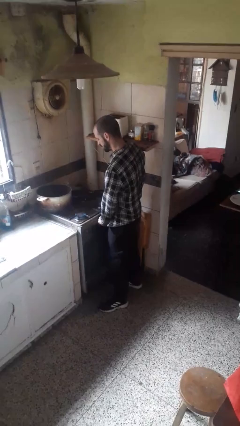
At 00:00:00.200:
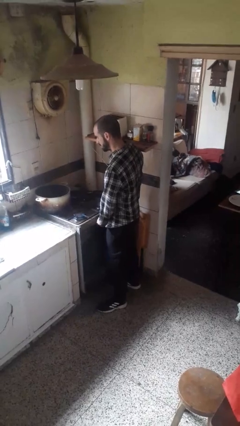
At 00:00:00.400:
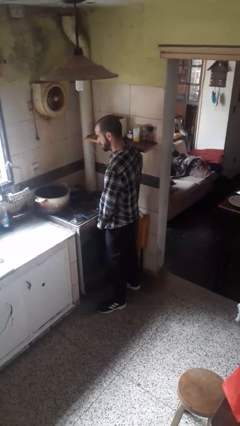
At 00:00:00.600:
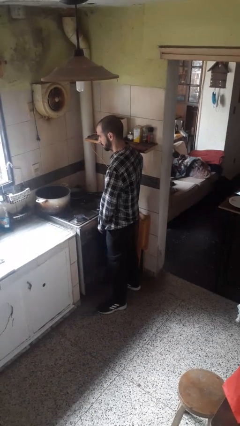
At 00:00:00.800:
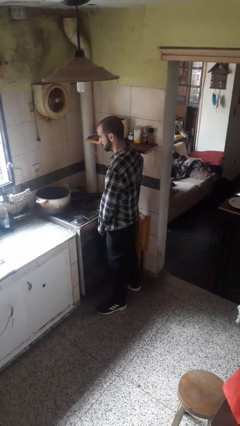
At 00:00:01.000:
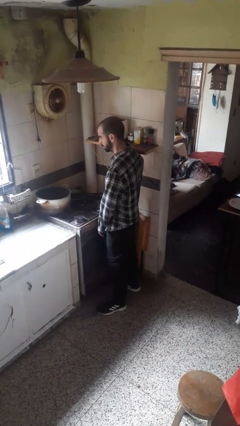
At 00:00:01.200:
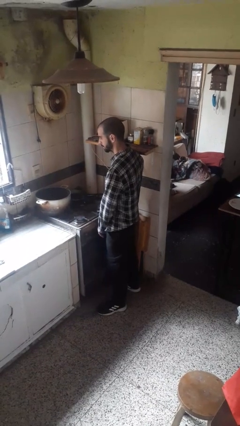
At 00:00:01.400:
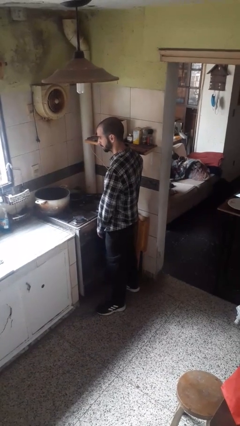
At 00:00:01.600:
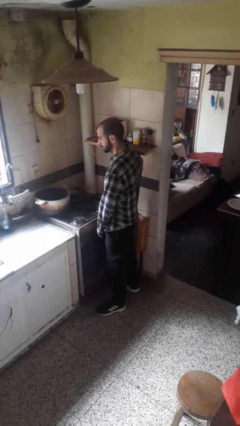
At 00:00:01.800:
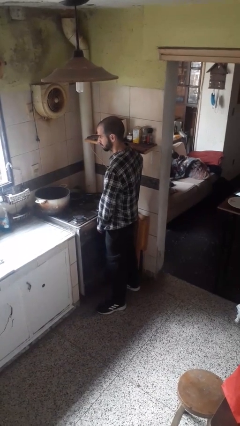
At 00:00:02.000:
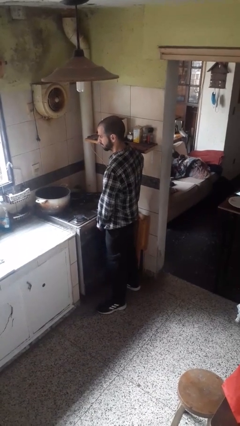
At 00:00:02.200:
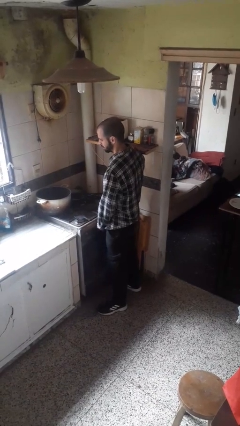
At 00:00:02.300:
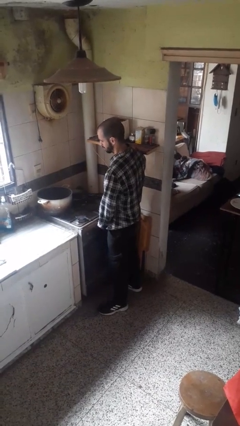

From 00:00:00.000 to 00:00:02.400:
person turns off stovetop

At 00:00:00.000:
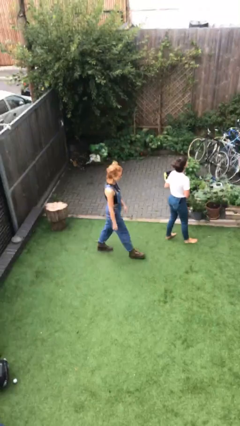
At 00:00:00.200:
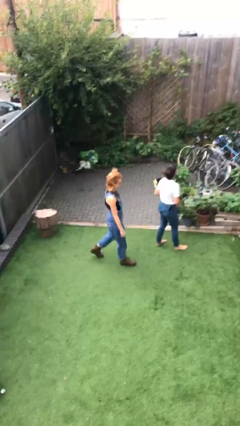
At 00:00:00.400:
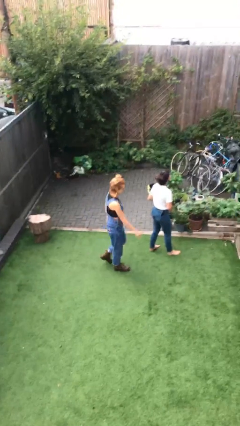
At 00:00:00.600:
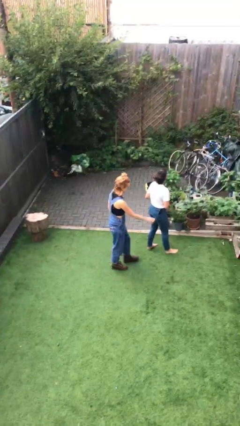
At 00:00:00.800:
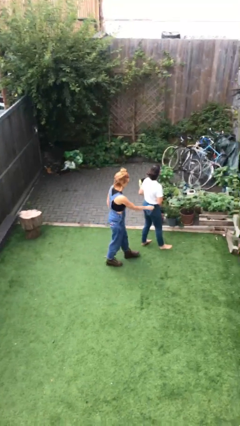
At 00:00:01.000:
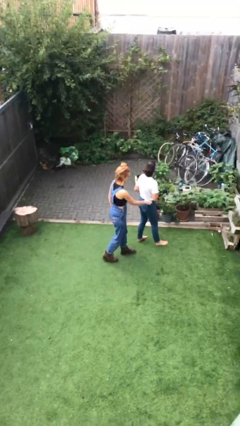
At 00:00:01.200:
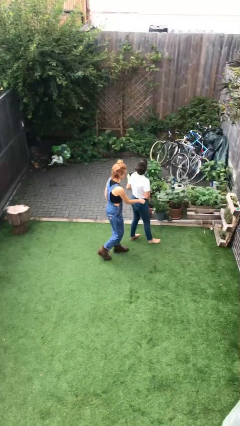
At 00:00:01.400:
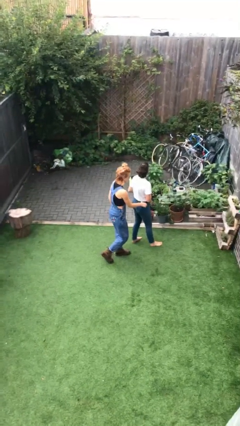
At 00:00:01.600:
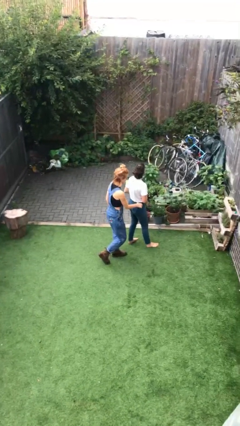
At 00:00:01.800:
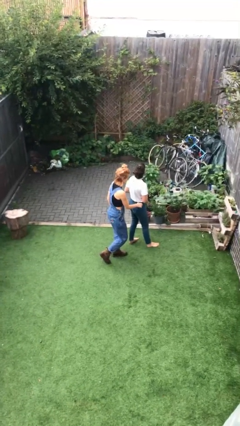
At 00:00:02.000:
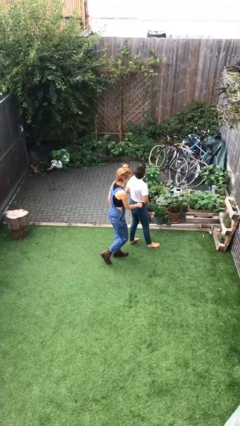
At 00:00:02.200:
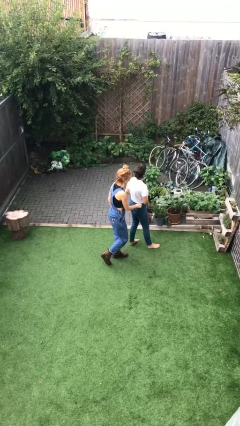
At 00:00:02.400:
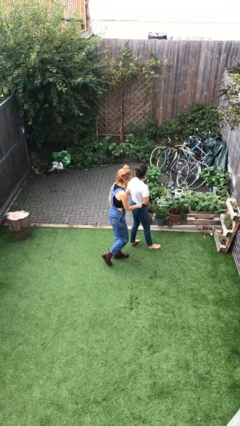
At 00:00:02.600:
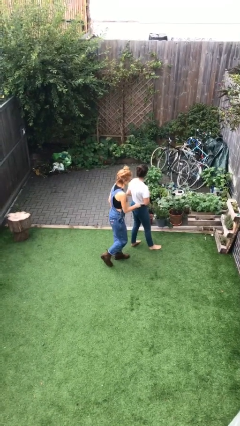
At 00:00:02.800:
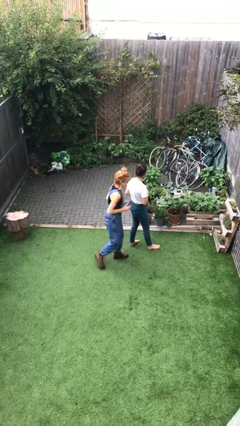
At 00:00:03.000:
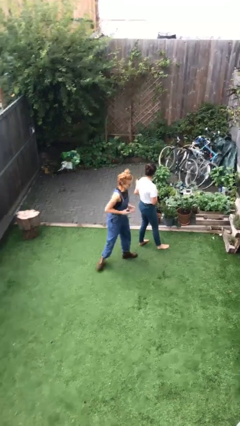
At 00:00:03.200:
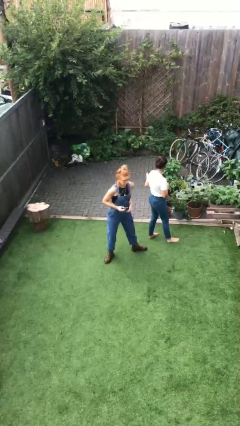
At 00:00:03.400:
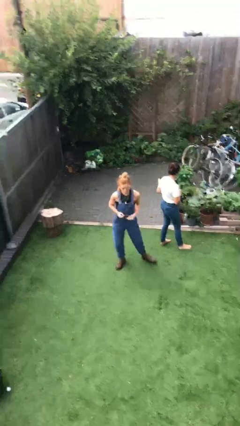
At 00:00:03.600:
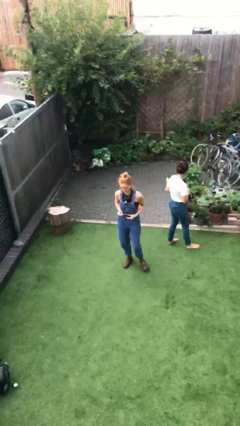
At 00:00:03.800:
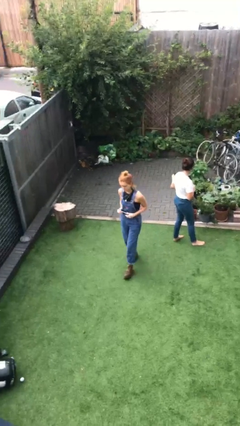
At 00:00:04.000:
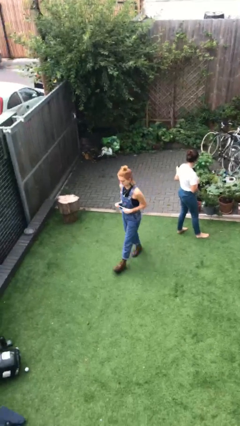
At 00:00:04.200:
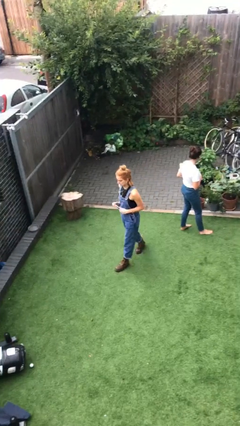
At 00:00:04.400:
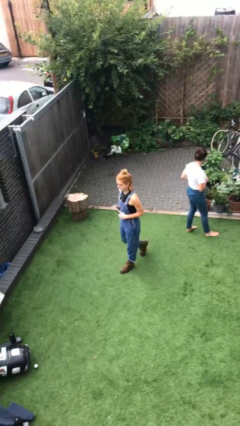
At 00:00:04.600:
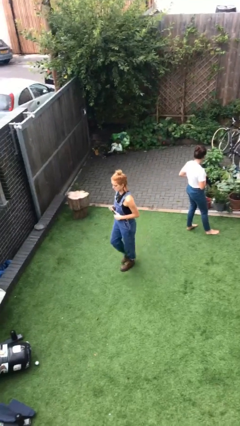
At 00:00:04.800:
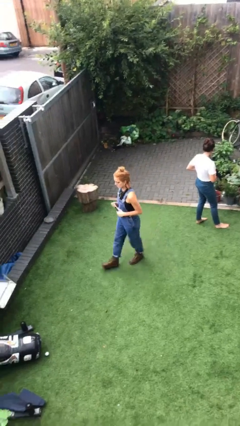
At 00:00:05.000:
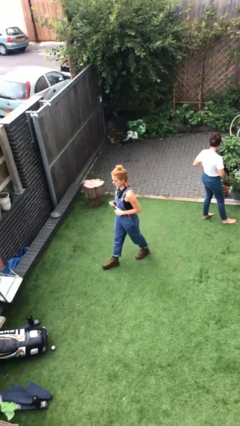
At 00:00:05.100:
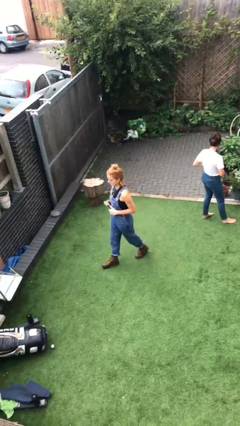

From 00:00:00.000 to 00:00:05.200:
person steals object from person

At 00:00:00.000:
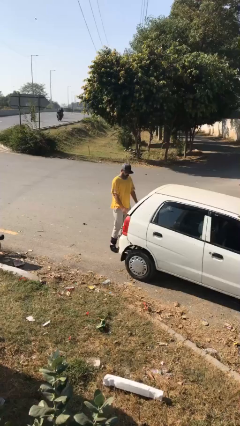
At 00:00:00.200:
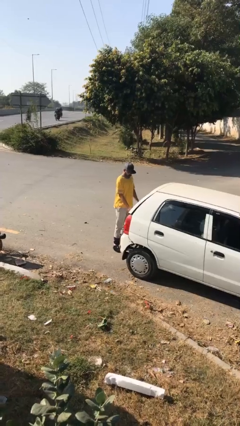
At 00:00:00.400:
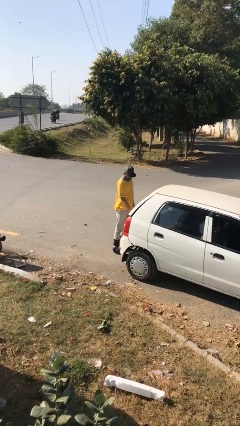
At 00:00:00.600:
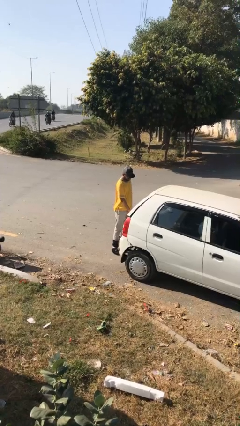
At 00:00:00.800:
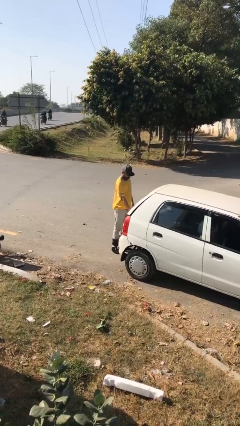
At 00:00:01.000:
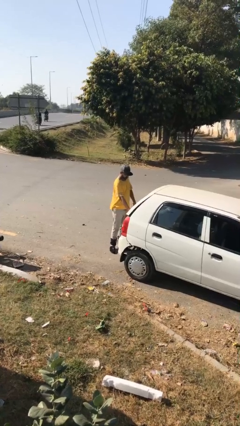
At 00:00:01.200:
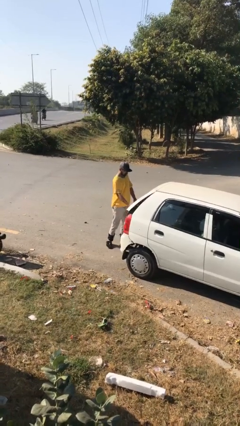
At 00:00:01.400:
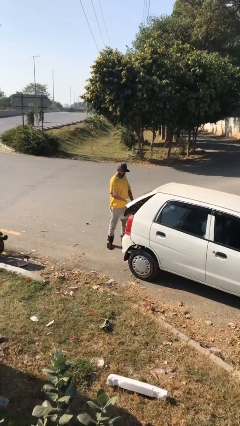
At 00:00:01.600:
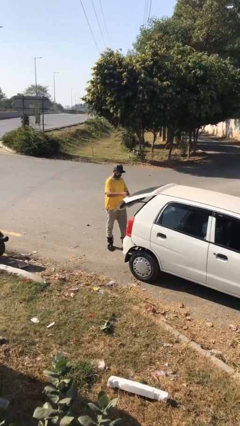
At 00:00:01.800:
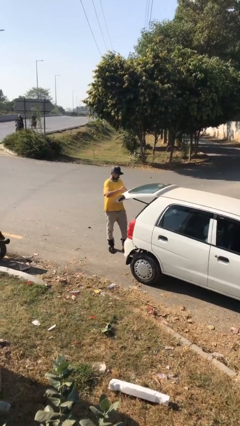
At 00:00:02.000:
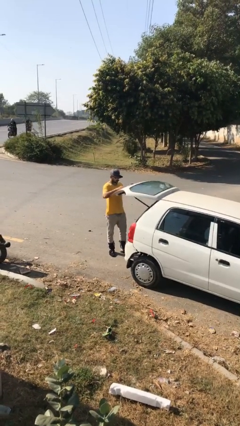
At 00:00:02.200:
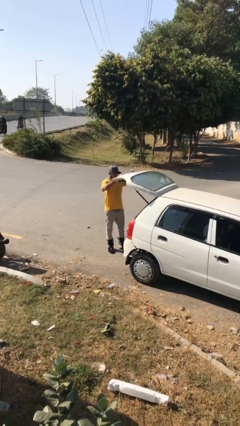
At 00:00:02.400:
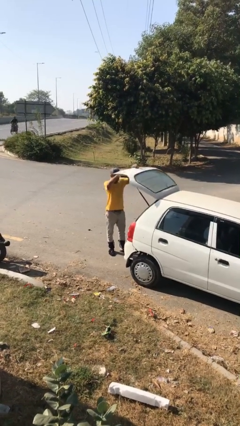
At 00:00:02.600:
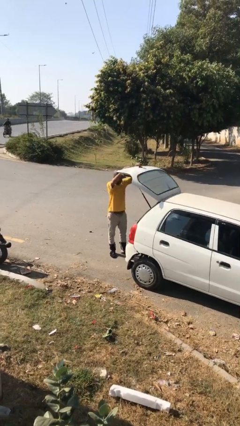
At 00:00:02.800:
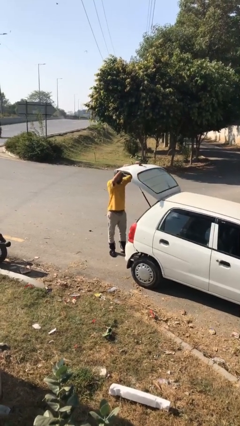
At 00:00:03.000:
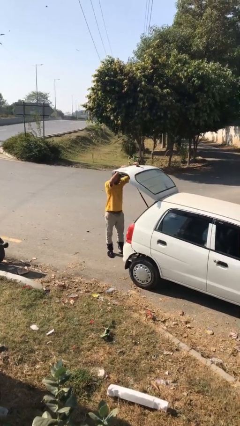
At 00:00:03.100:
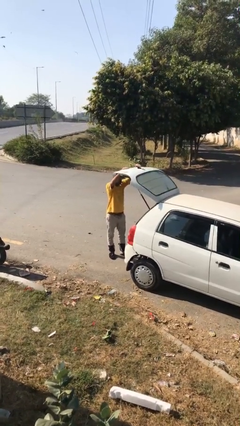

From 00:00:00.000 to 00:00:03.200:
person opens car trunk

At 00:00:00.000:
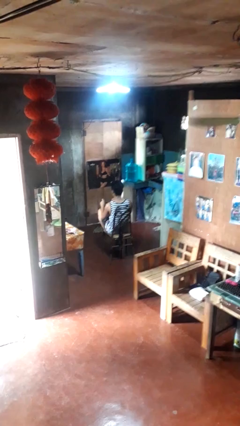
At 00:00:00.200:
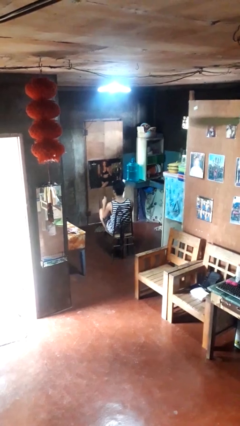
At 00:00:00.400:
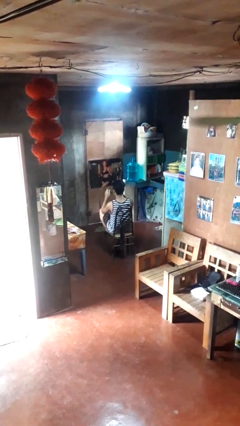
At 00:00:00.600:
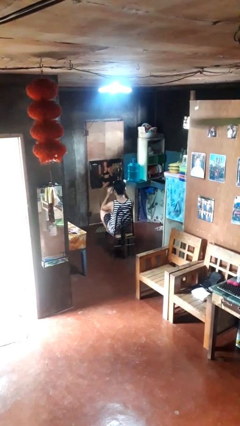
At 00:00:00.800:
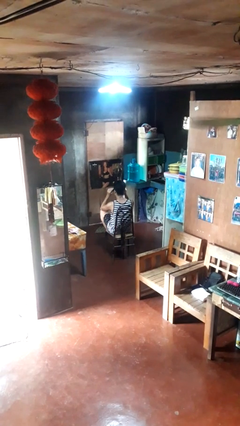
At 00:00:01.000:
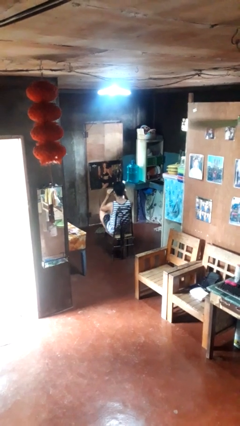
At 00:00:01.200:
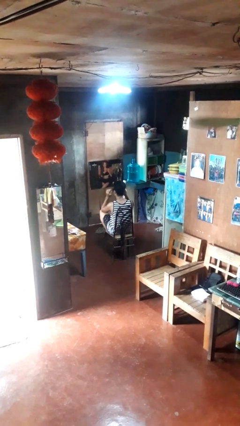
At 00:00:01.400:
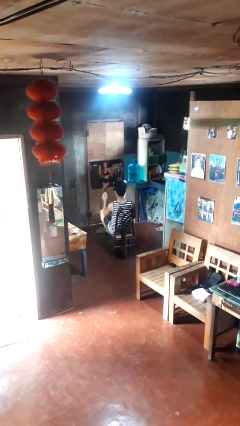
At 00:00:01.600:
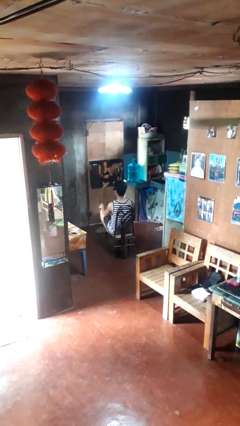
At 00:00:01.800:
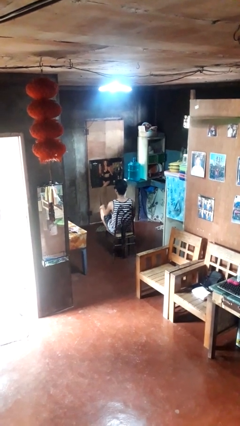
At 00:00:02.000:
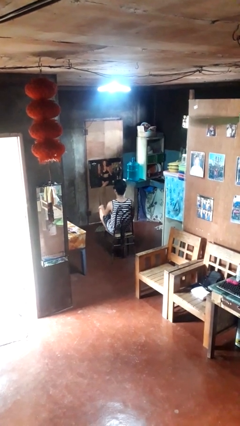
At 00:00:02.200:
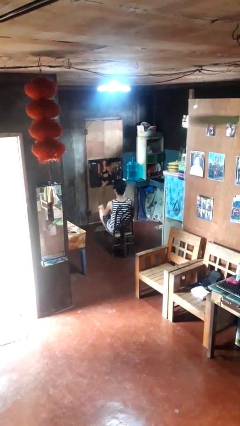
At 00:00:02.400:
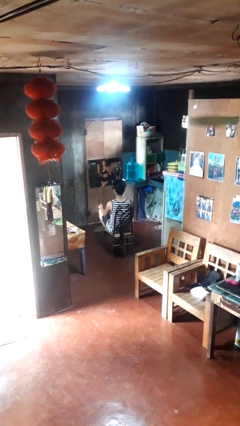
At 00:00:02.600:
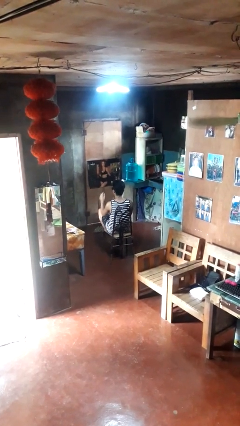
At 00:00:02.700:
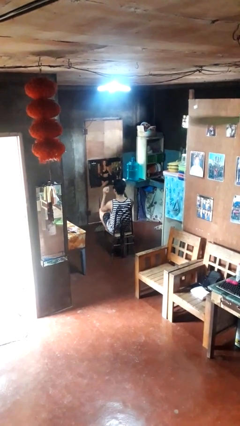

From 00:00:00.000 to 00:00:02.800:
person puts on sunglasses

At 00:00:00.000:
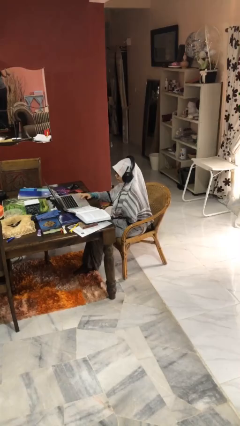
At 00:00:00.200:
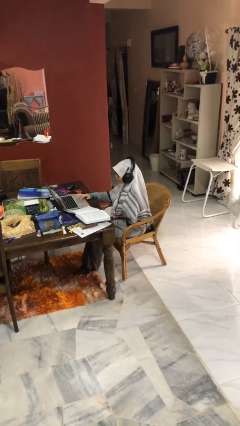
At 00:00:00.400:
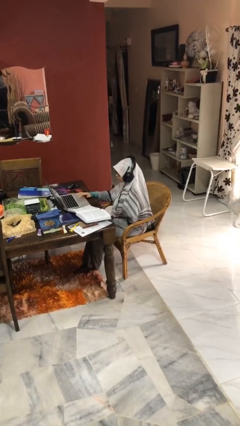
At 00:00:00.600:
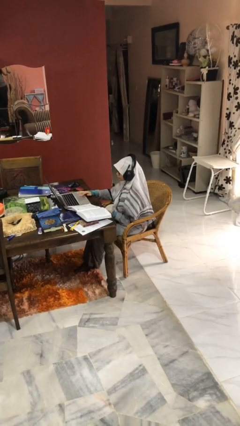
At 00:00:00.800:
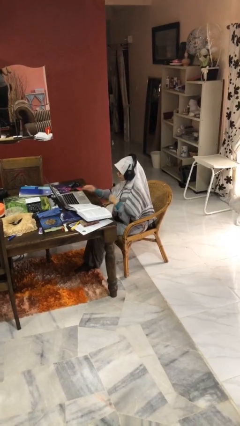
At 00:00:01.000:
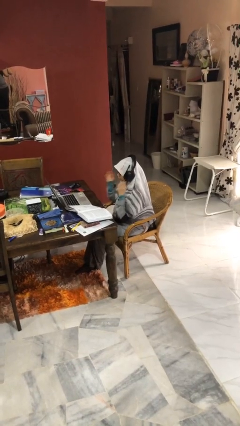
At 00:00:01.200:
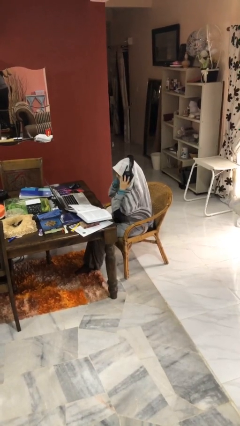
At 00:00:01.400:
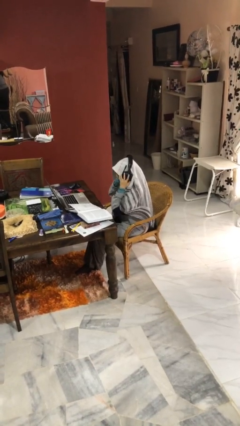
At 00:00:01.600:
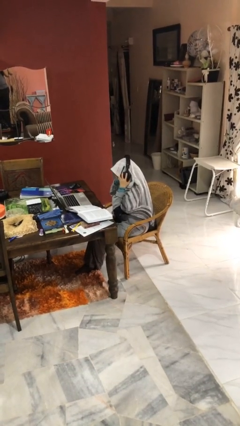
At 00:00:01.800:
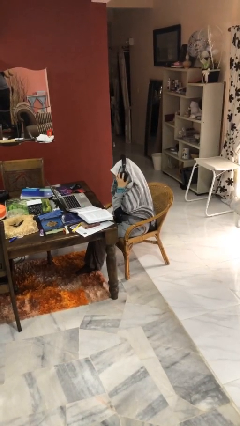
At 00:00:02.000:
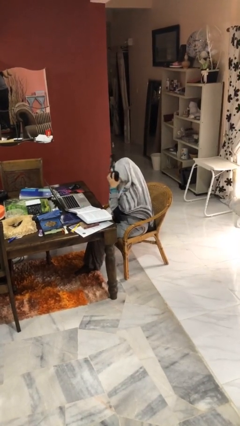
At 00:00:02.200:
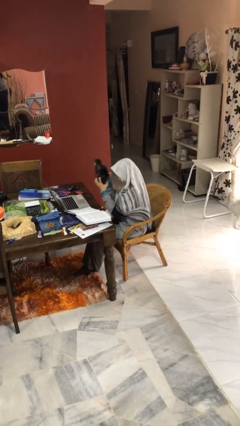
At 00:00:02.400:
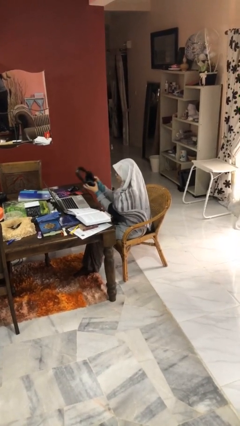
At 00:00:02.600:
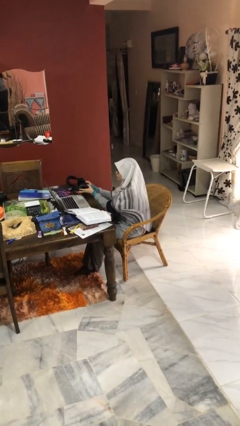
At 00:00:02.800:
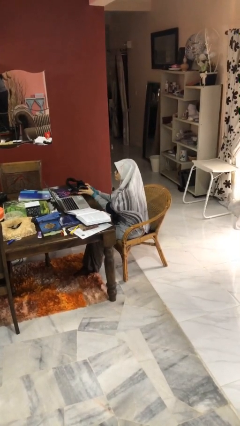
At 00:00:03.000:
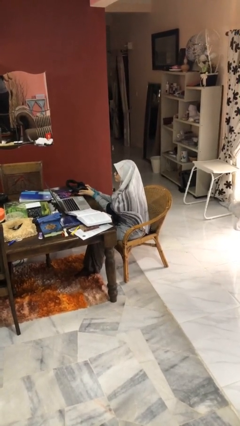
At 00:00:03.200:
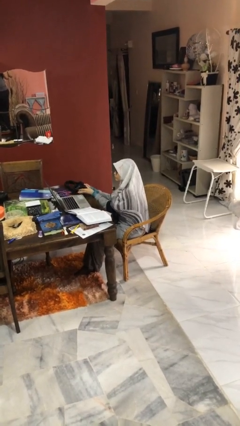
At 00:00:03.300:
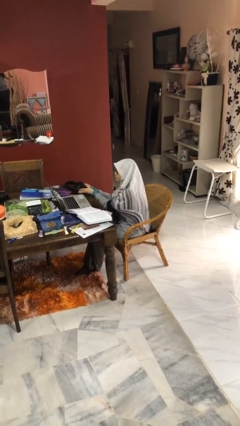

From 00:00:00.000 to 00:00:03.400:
person takes off headphones
